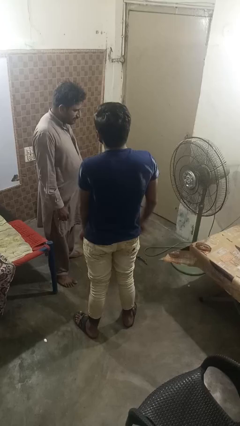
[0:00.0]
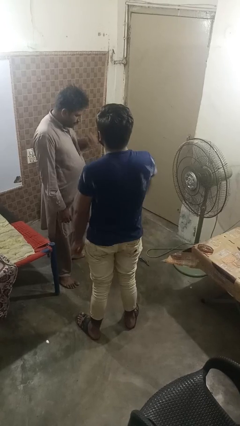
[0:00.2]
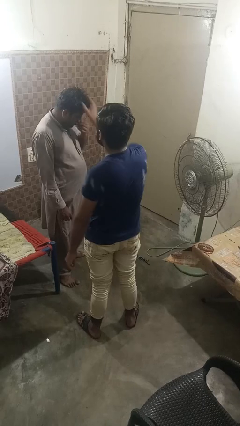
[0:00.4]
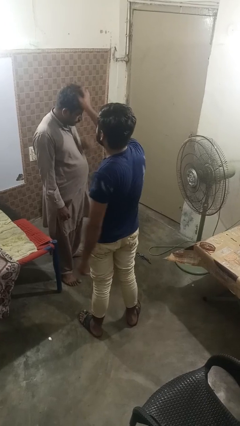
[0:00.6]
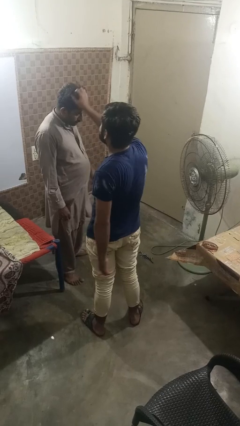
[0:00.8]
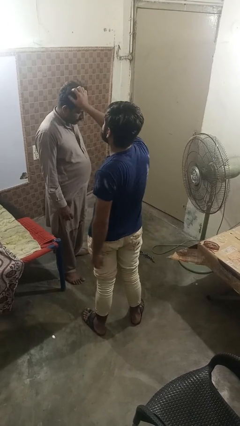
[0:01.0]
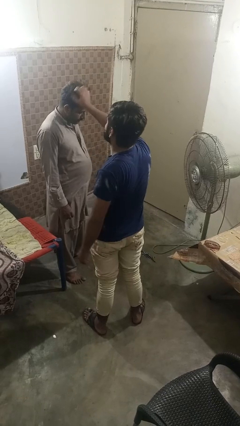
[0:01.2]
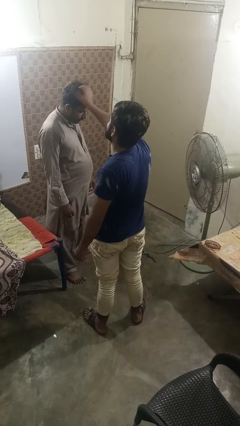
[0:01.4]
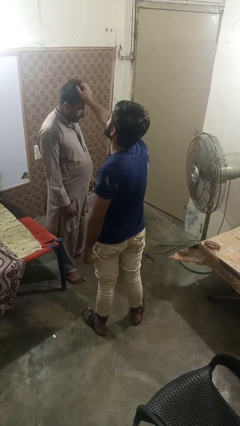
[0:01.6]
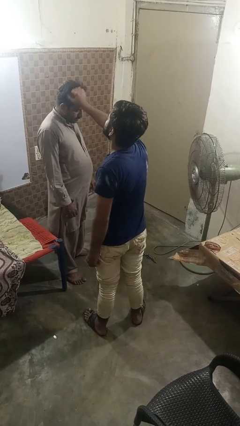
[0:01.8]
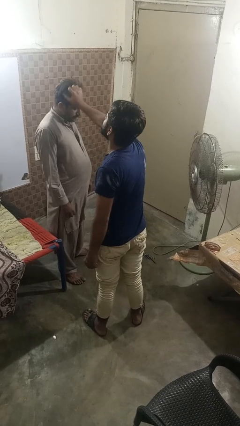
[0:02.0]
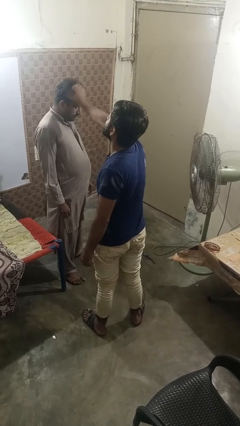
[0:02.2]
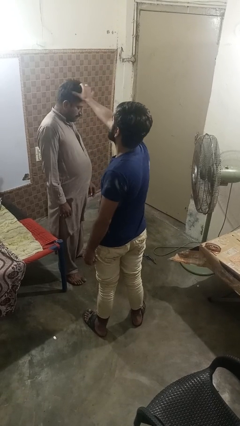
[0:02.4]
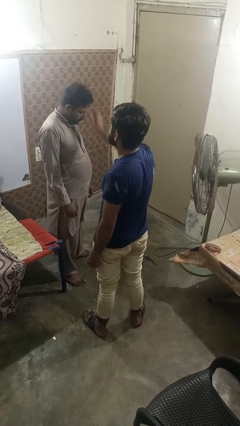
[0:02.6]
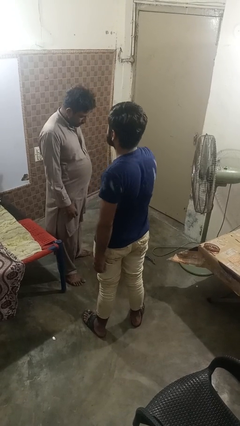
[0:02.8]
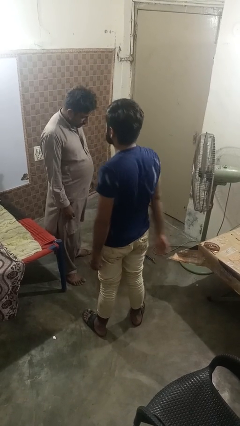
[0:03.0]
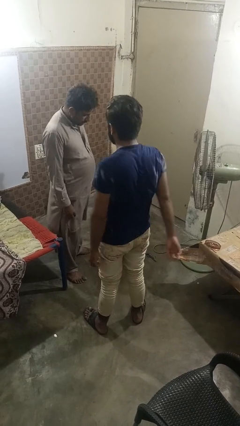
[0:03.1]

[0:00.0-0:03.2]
person grabs person by hair

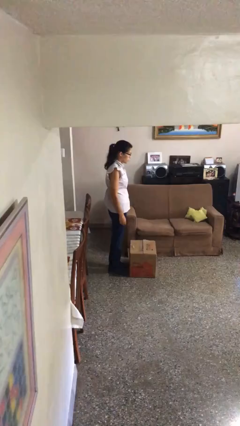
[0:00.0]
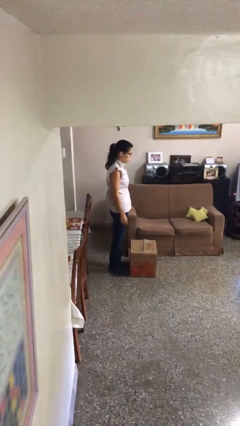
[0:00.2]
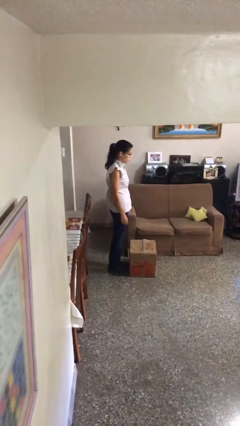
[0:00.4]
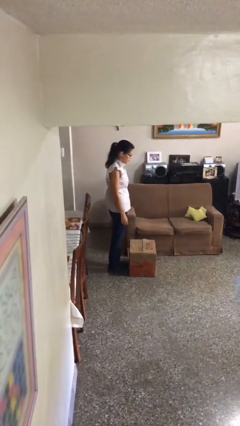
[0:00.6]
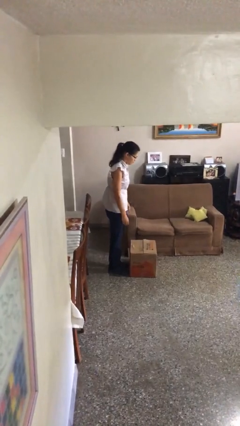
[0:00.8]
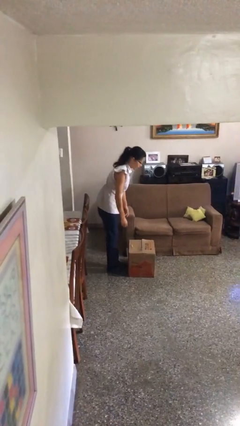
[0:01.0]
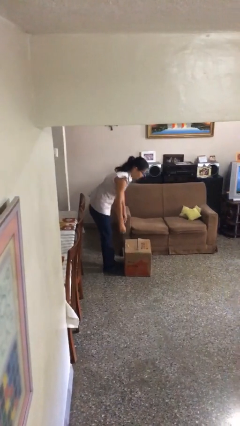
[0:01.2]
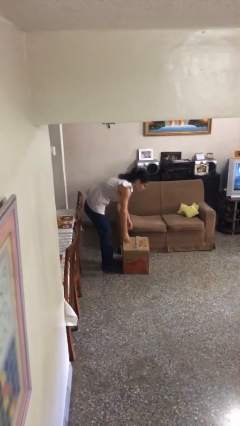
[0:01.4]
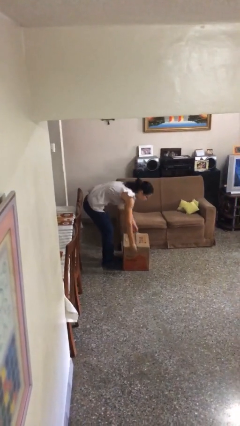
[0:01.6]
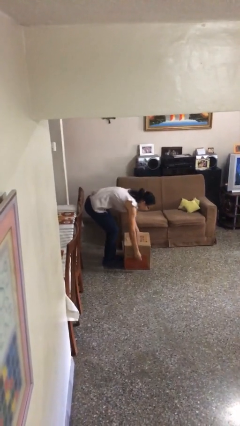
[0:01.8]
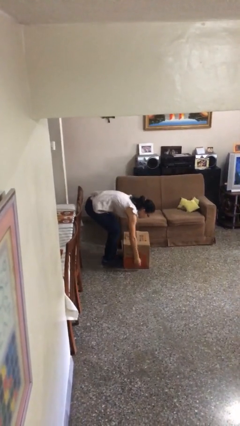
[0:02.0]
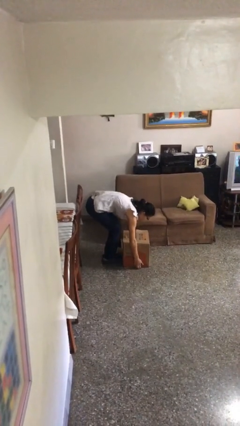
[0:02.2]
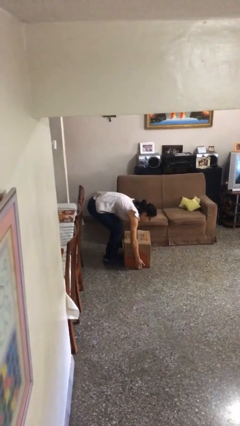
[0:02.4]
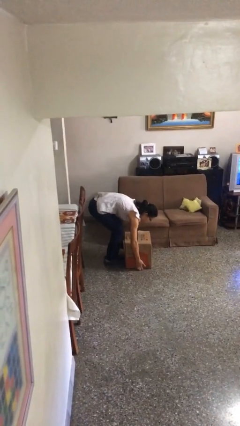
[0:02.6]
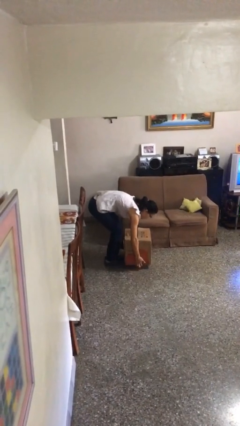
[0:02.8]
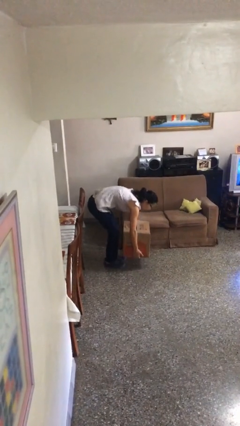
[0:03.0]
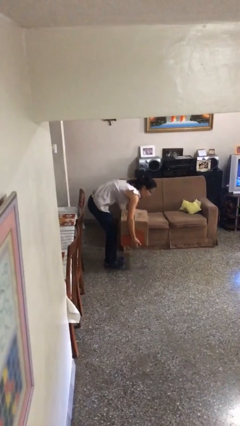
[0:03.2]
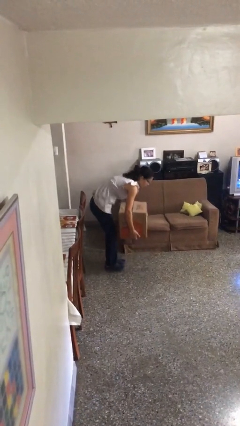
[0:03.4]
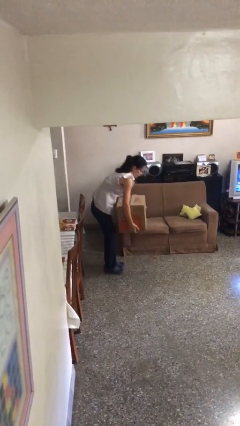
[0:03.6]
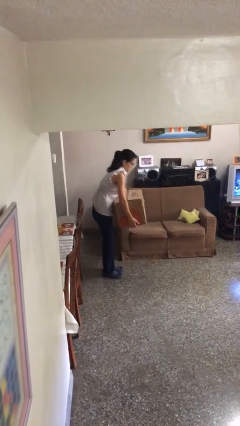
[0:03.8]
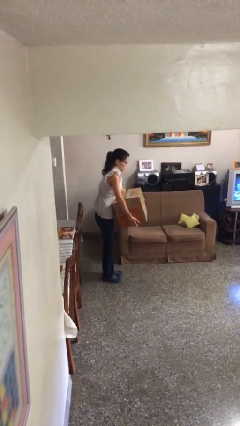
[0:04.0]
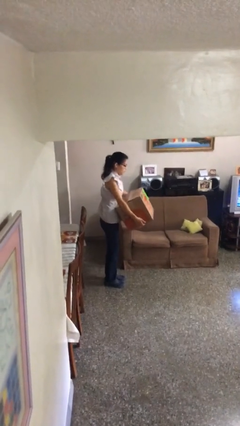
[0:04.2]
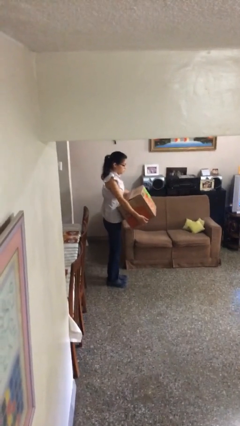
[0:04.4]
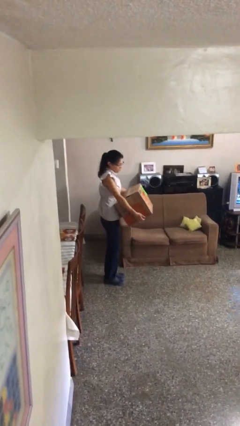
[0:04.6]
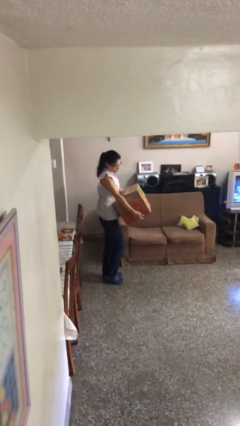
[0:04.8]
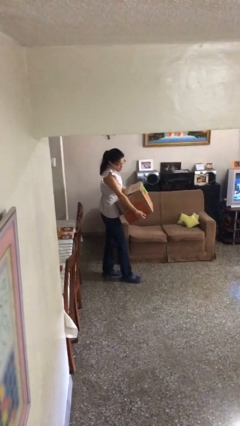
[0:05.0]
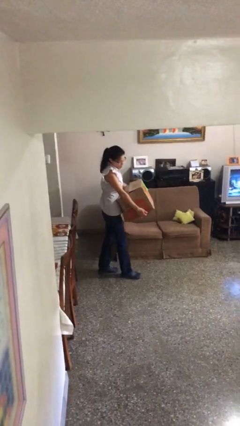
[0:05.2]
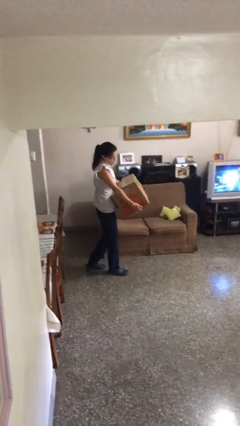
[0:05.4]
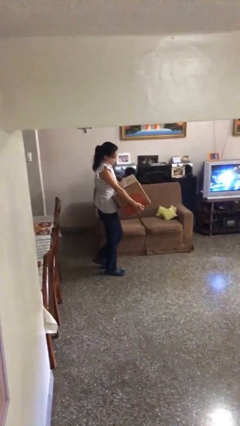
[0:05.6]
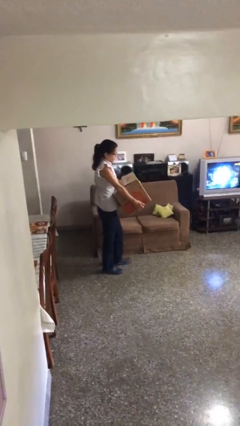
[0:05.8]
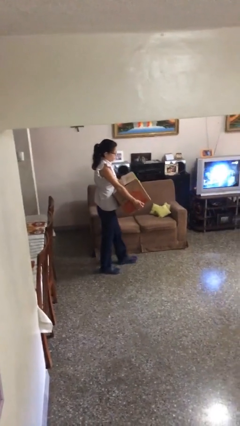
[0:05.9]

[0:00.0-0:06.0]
person picks up object from floor

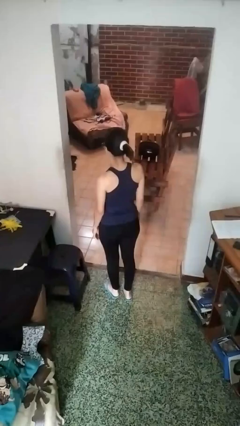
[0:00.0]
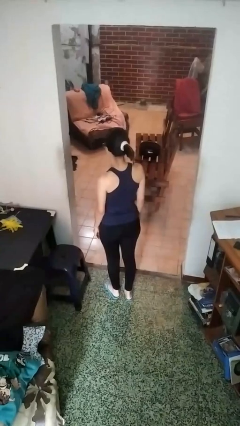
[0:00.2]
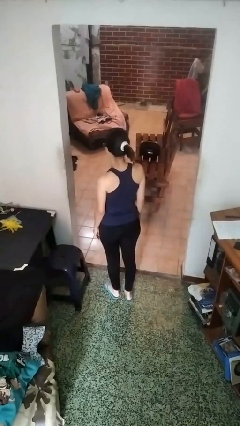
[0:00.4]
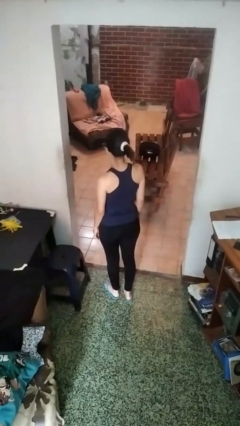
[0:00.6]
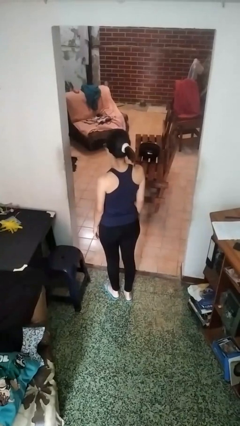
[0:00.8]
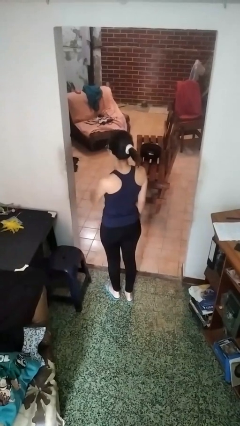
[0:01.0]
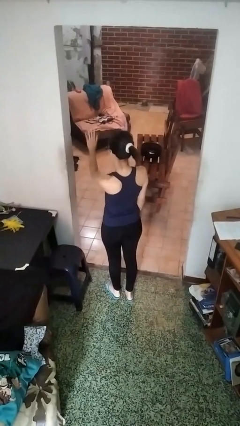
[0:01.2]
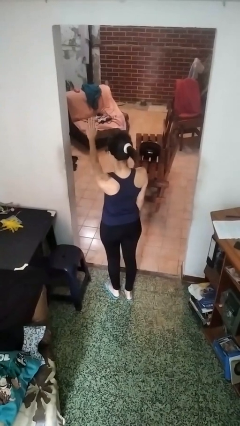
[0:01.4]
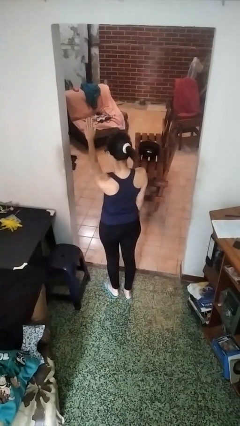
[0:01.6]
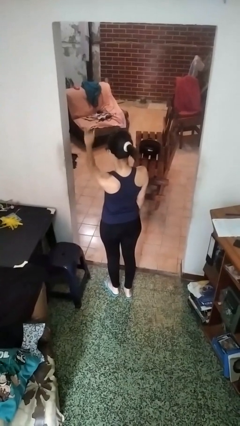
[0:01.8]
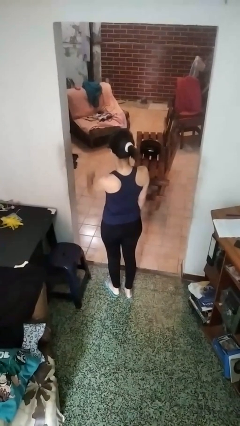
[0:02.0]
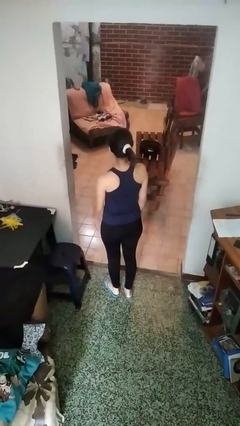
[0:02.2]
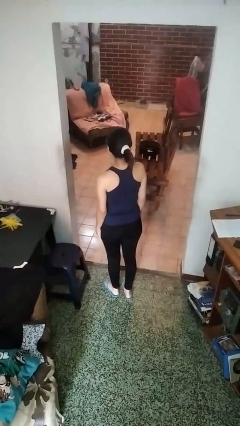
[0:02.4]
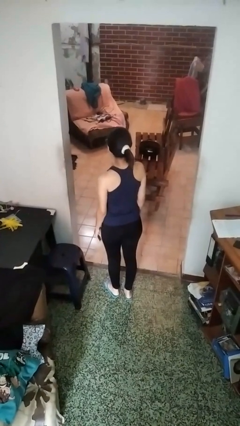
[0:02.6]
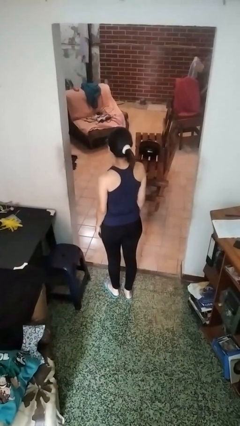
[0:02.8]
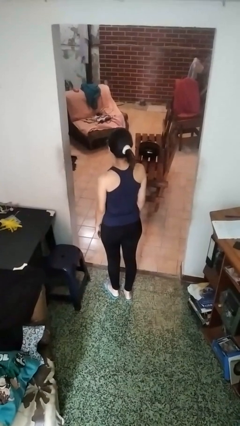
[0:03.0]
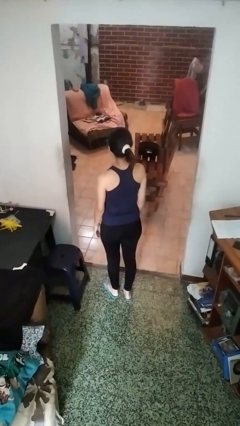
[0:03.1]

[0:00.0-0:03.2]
person gestures stop

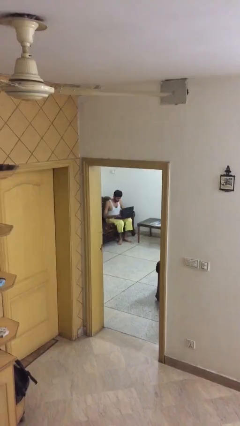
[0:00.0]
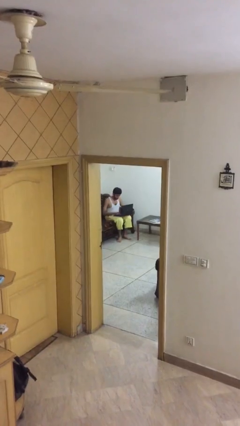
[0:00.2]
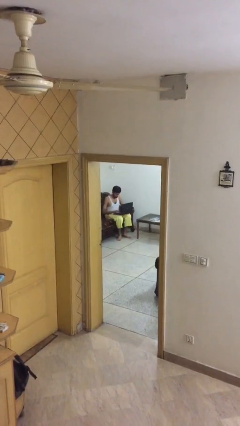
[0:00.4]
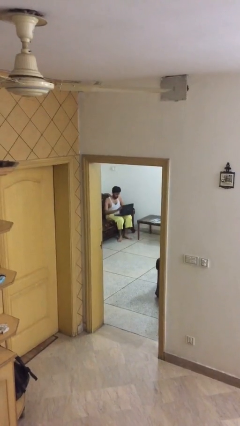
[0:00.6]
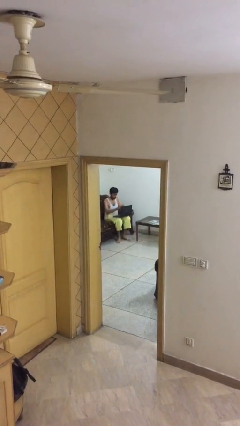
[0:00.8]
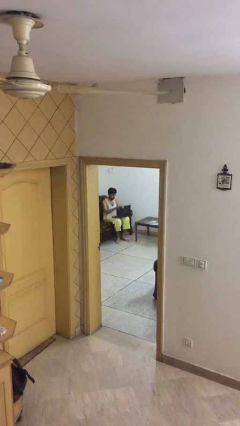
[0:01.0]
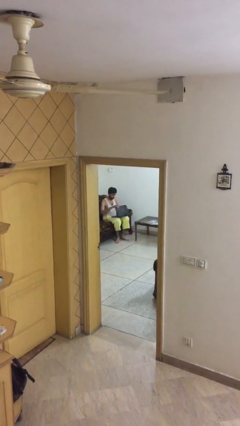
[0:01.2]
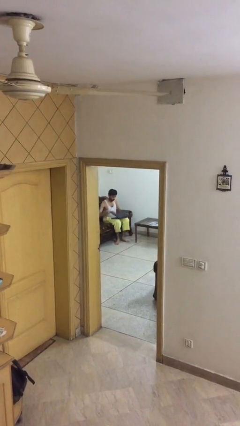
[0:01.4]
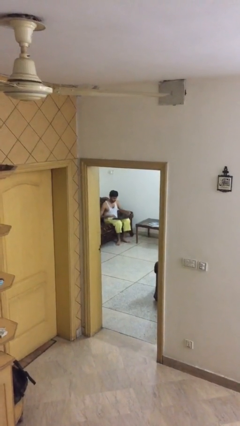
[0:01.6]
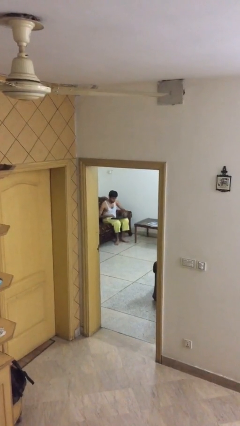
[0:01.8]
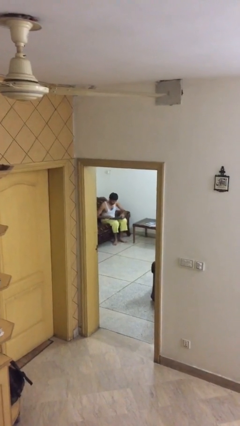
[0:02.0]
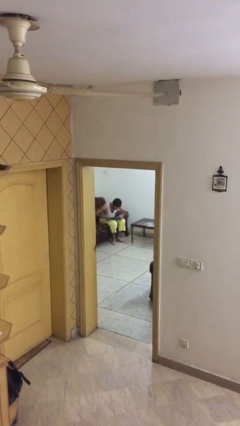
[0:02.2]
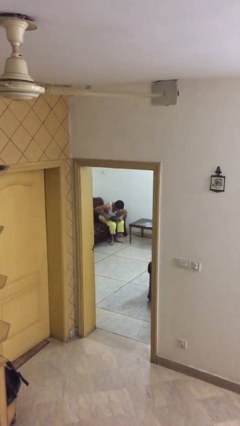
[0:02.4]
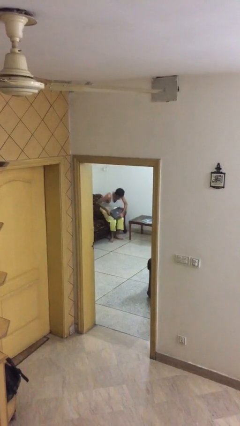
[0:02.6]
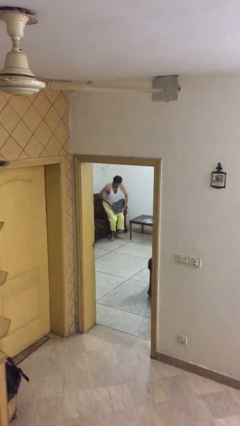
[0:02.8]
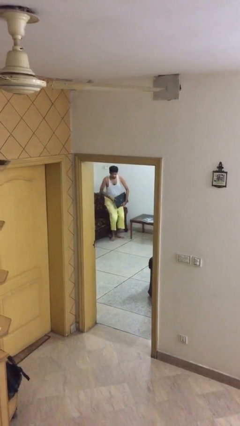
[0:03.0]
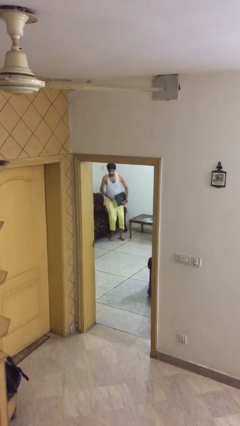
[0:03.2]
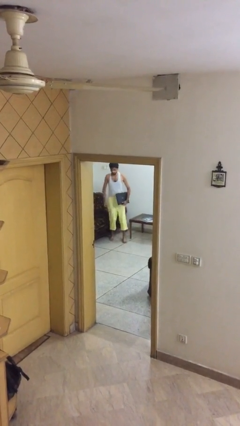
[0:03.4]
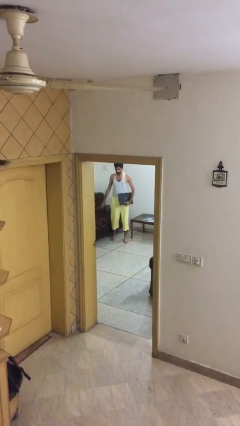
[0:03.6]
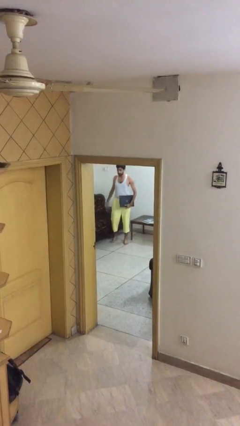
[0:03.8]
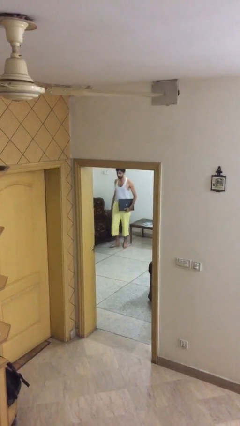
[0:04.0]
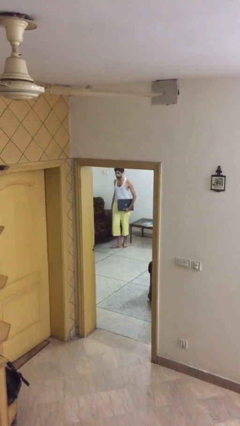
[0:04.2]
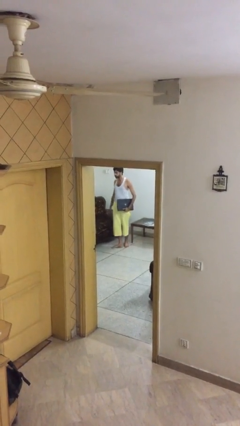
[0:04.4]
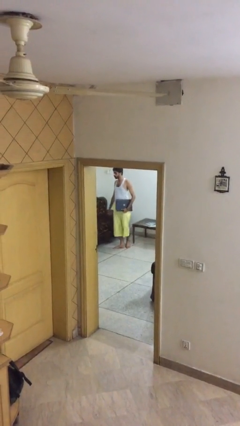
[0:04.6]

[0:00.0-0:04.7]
person stands up

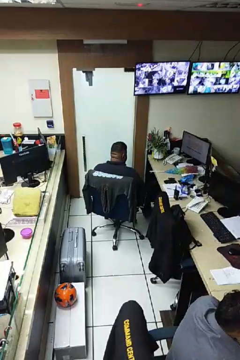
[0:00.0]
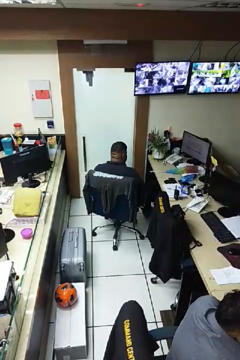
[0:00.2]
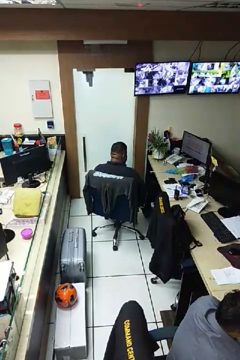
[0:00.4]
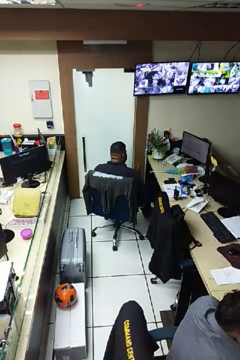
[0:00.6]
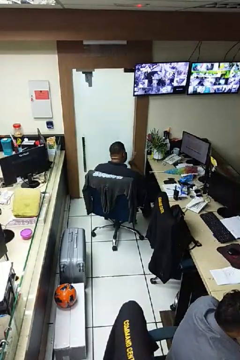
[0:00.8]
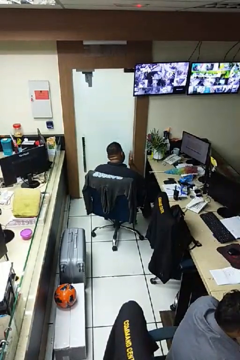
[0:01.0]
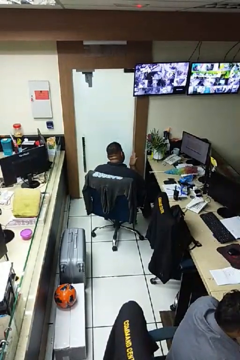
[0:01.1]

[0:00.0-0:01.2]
person swats bug
